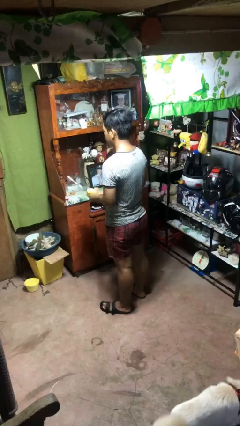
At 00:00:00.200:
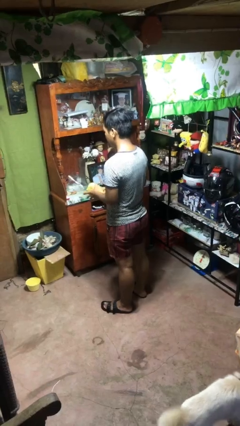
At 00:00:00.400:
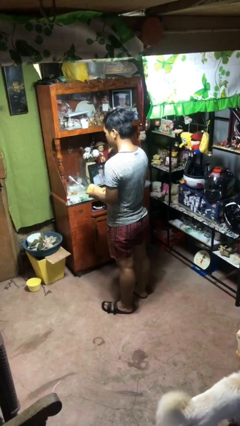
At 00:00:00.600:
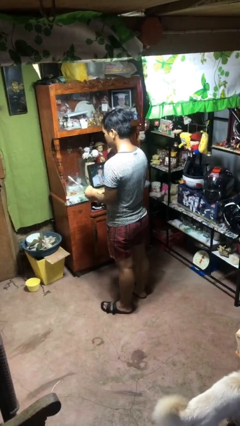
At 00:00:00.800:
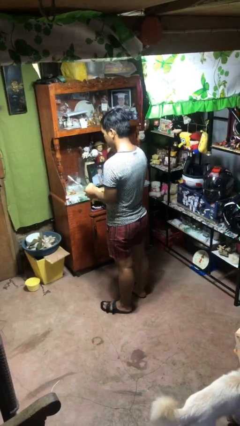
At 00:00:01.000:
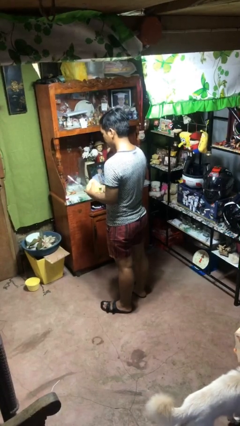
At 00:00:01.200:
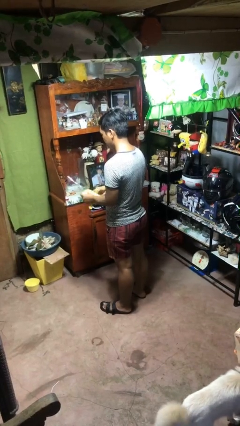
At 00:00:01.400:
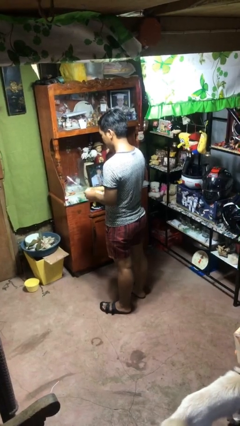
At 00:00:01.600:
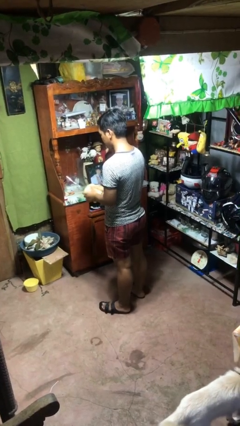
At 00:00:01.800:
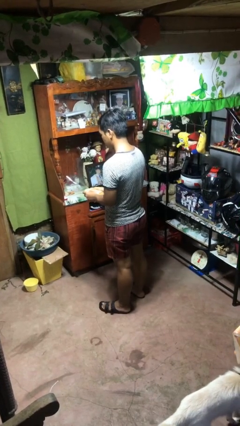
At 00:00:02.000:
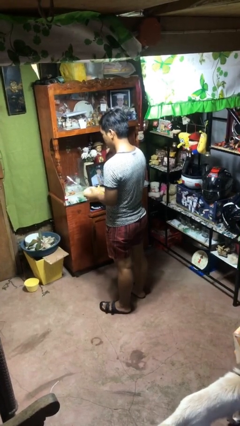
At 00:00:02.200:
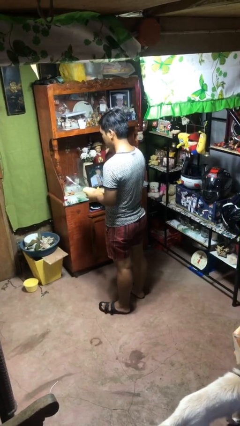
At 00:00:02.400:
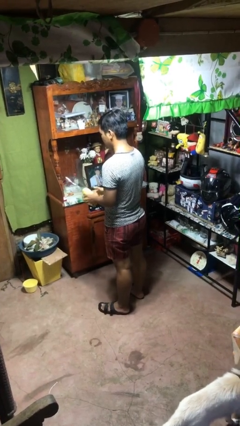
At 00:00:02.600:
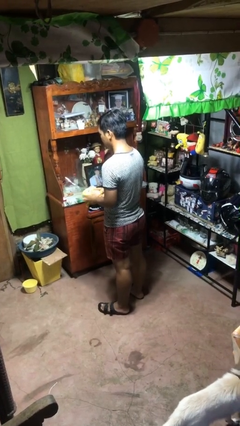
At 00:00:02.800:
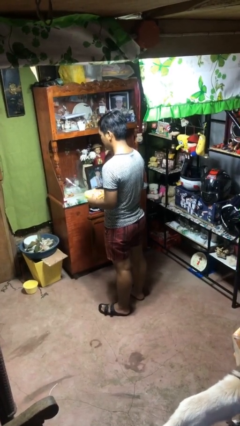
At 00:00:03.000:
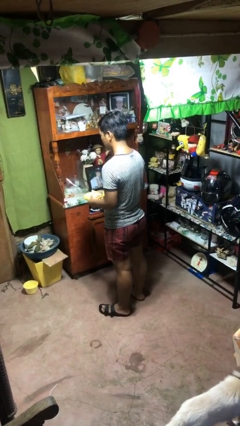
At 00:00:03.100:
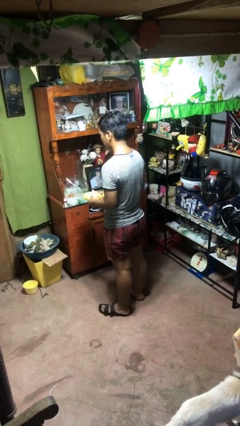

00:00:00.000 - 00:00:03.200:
person squeezes object

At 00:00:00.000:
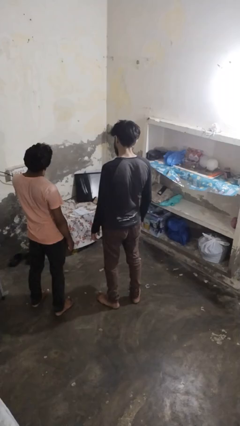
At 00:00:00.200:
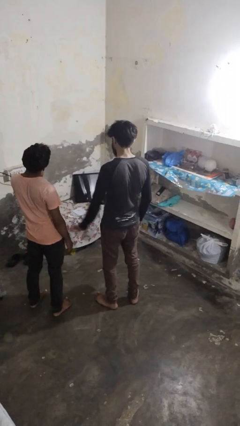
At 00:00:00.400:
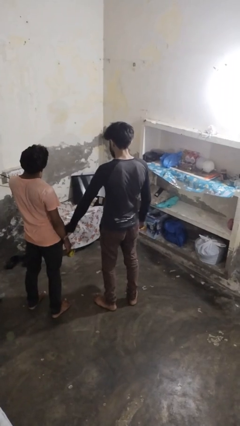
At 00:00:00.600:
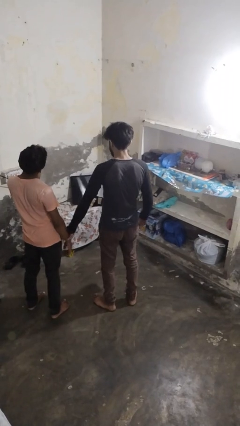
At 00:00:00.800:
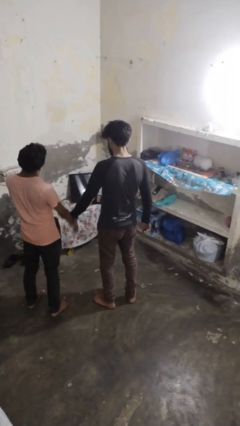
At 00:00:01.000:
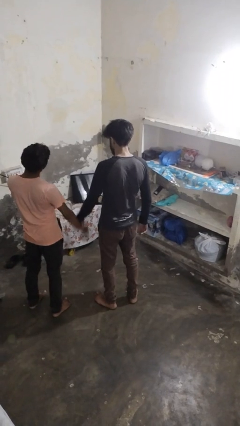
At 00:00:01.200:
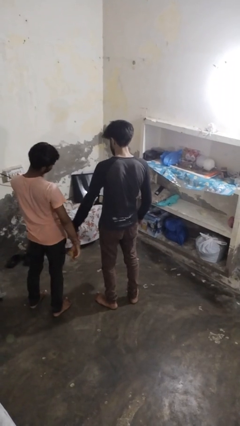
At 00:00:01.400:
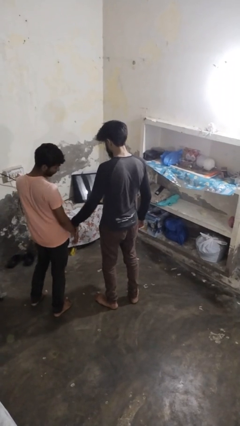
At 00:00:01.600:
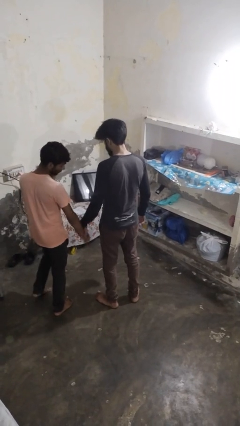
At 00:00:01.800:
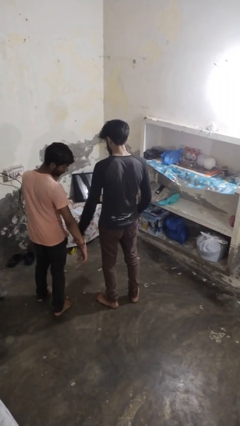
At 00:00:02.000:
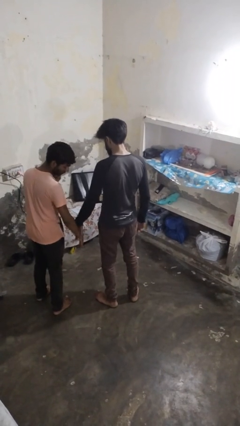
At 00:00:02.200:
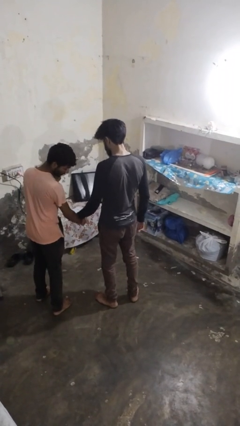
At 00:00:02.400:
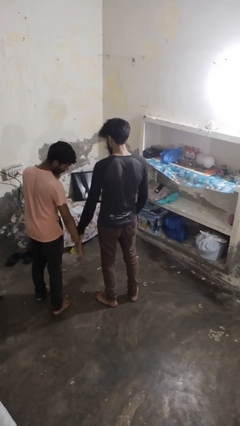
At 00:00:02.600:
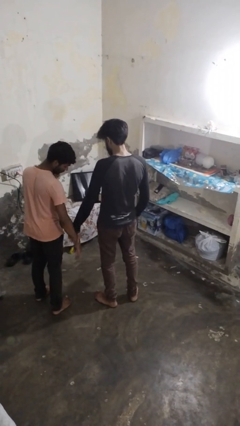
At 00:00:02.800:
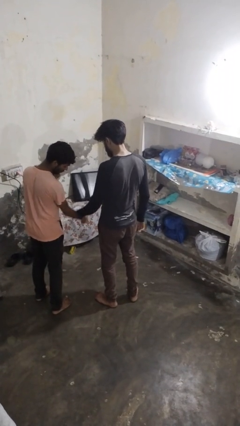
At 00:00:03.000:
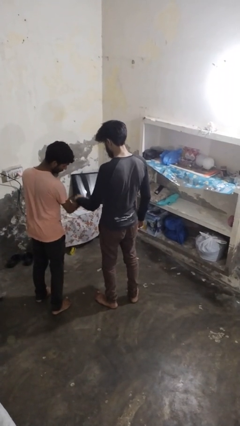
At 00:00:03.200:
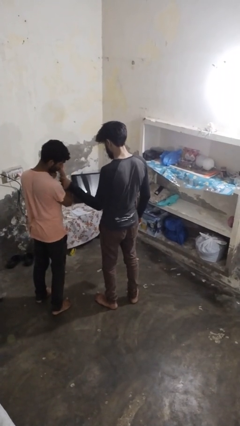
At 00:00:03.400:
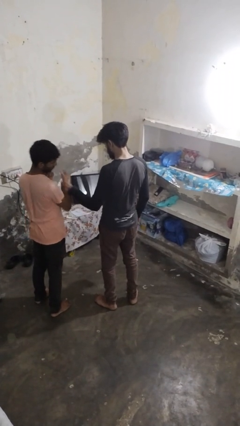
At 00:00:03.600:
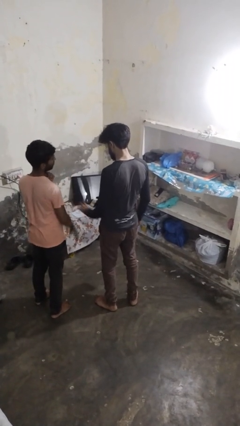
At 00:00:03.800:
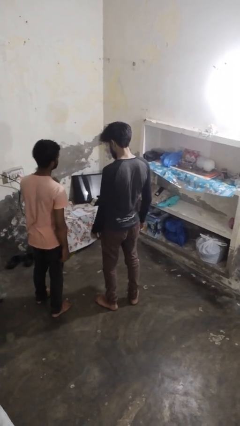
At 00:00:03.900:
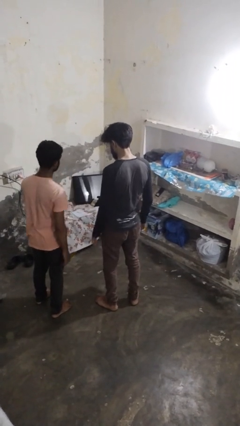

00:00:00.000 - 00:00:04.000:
person grabs person by forearm

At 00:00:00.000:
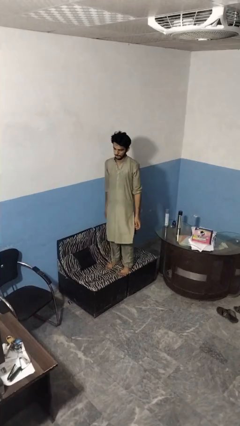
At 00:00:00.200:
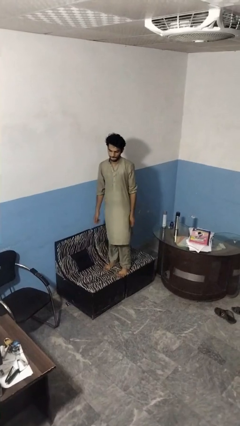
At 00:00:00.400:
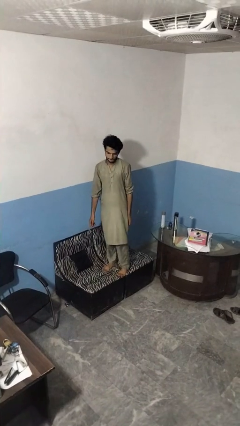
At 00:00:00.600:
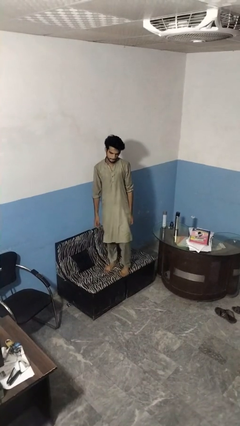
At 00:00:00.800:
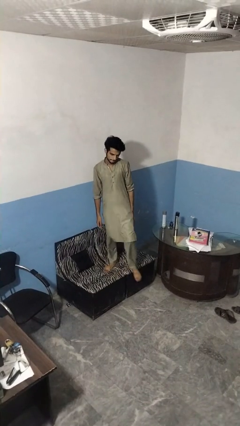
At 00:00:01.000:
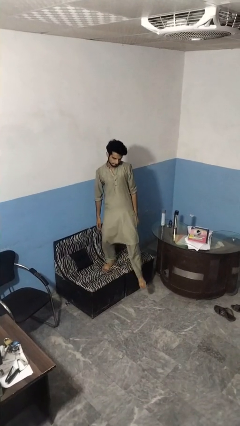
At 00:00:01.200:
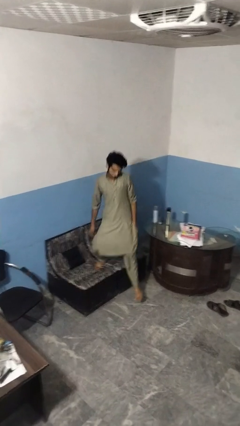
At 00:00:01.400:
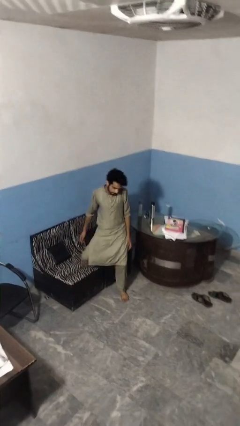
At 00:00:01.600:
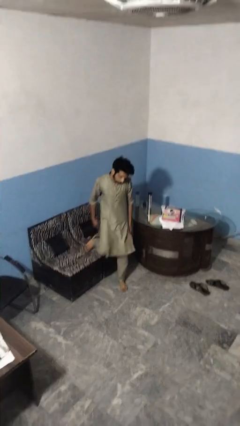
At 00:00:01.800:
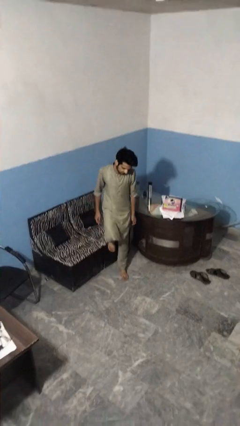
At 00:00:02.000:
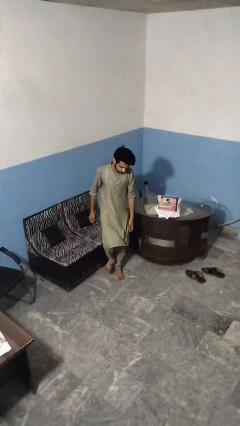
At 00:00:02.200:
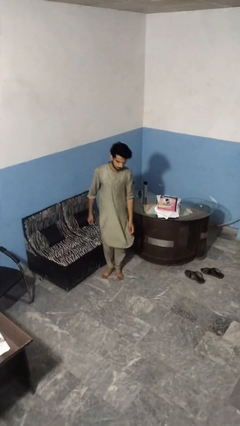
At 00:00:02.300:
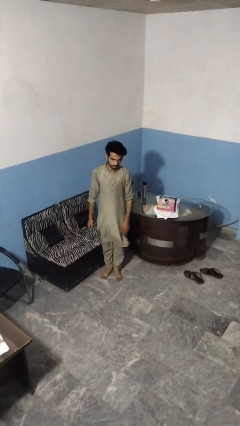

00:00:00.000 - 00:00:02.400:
person climbs off couch

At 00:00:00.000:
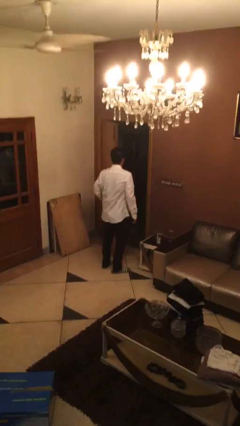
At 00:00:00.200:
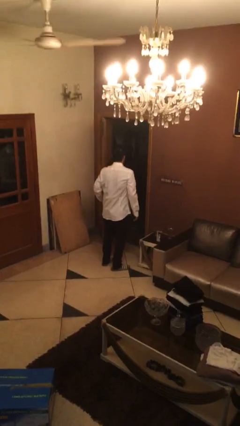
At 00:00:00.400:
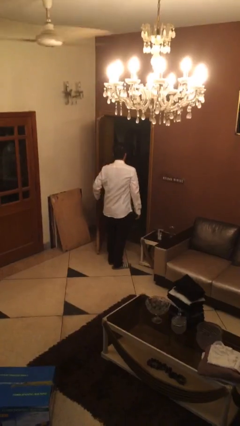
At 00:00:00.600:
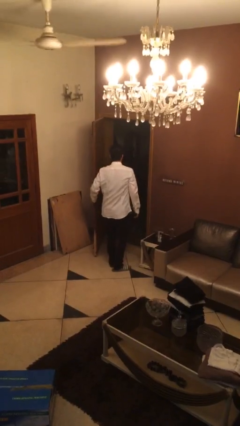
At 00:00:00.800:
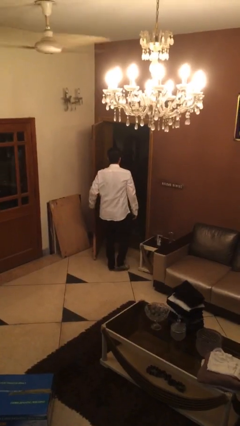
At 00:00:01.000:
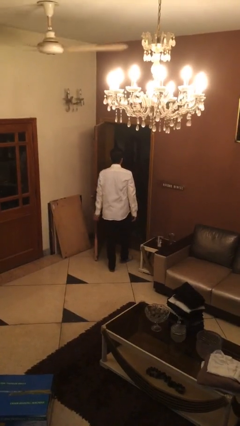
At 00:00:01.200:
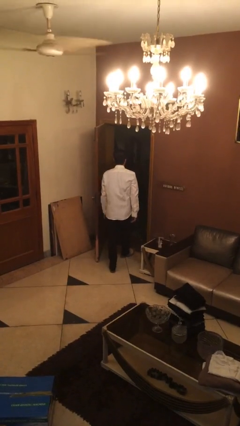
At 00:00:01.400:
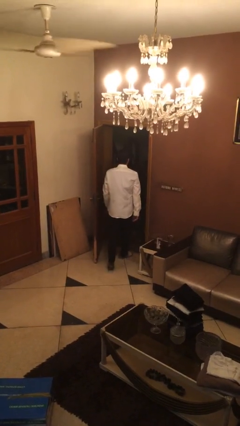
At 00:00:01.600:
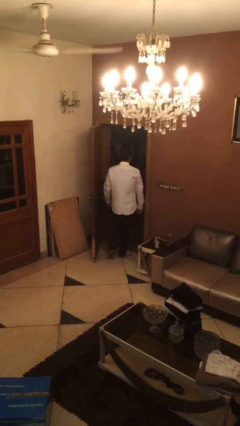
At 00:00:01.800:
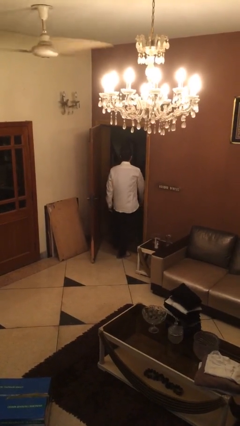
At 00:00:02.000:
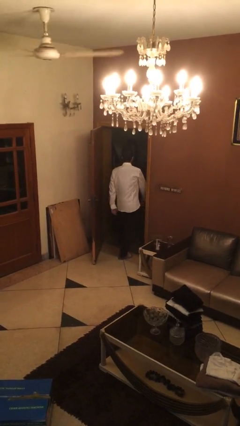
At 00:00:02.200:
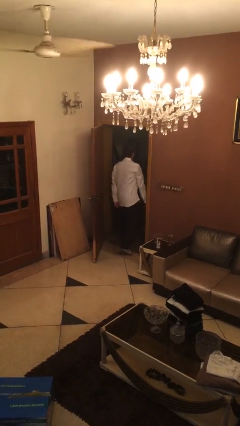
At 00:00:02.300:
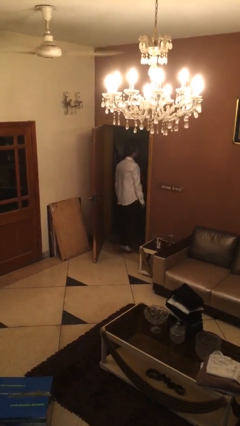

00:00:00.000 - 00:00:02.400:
person exits scene through structure

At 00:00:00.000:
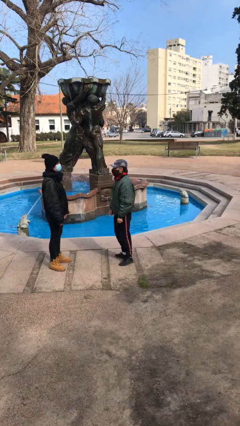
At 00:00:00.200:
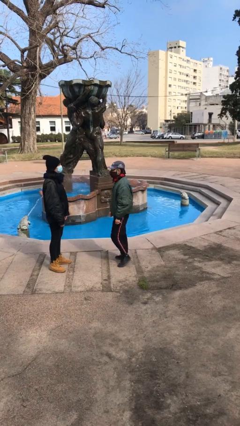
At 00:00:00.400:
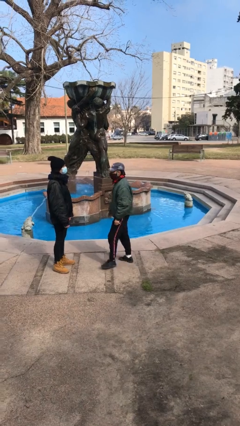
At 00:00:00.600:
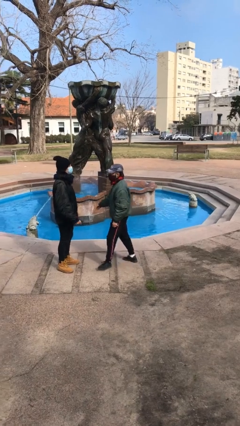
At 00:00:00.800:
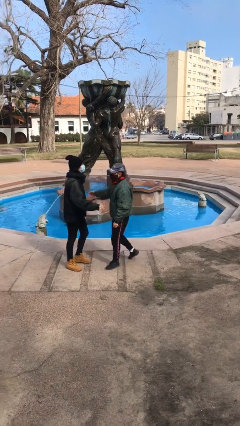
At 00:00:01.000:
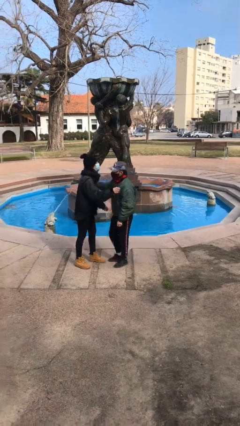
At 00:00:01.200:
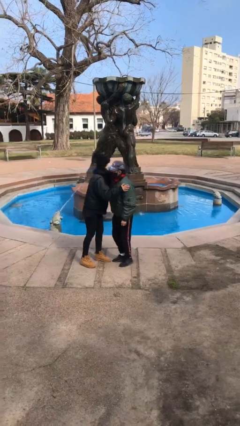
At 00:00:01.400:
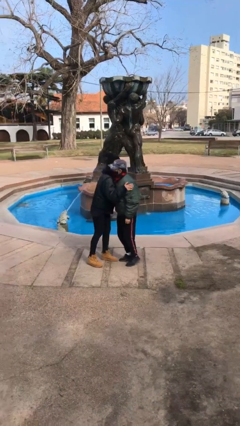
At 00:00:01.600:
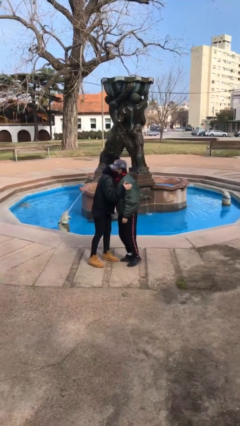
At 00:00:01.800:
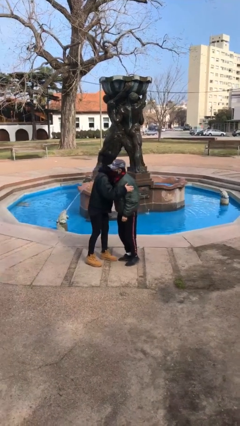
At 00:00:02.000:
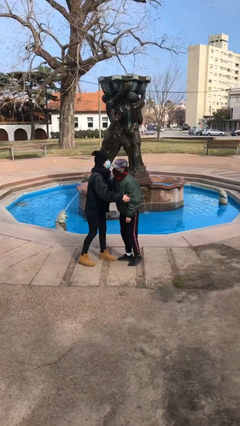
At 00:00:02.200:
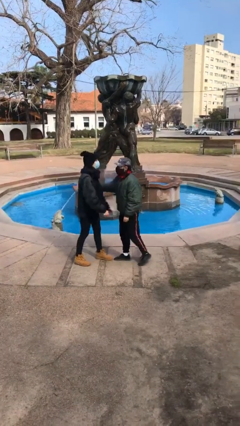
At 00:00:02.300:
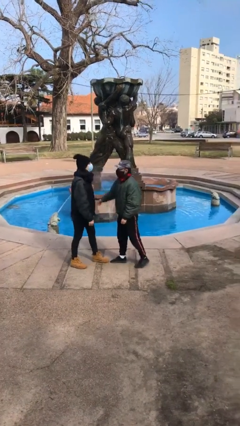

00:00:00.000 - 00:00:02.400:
person kisses cheek of person

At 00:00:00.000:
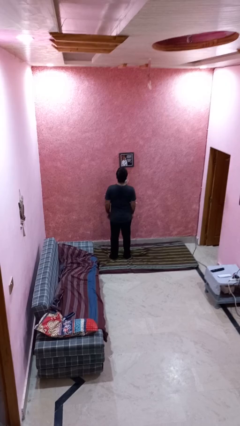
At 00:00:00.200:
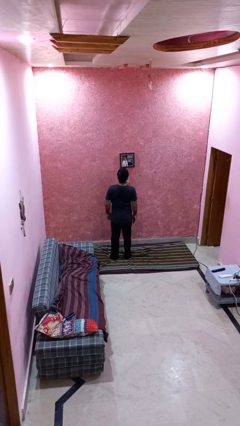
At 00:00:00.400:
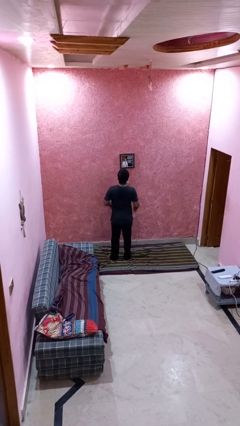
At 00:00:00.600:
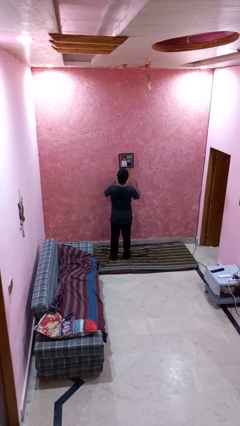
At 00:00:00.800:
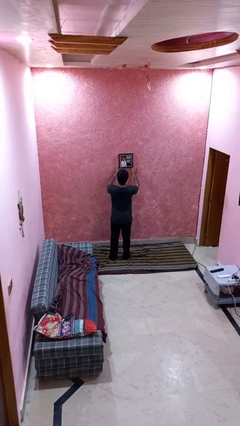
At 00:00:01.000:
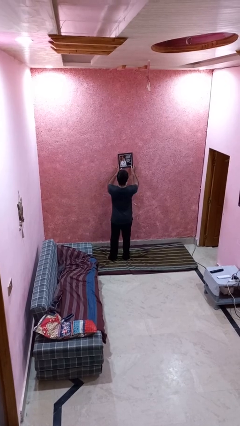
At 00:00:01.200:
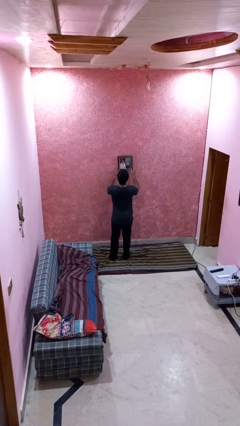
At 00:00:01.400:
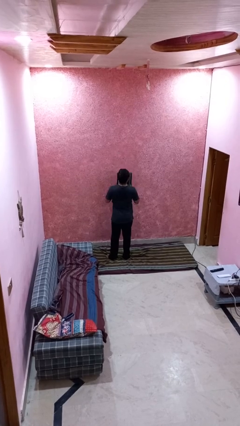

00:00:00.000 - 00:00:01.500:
person takes down picture frame

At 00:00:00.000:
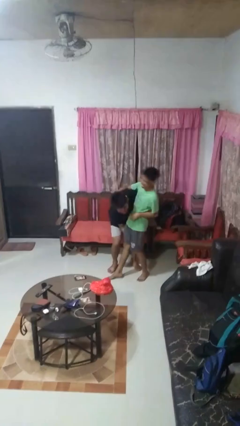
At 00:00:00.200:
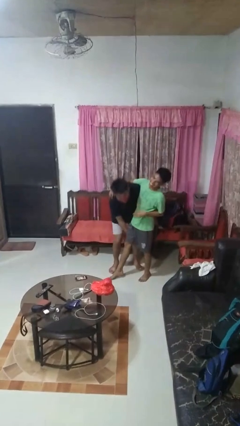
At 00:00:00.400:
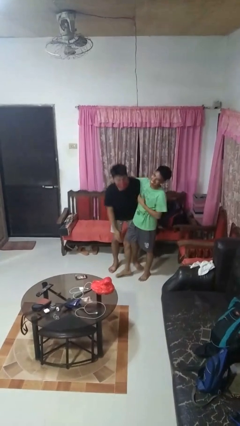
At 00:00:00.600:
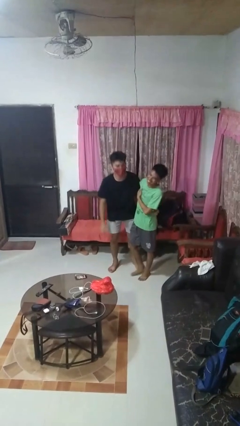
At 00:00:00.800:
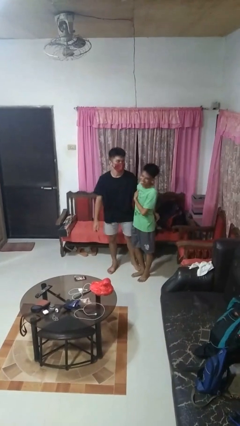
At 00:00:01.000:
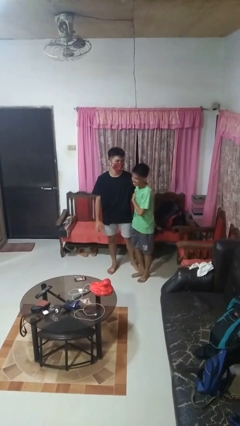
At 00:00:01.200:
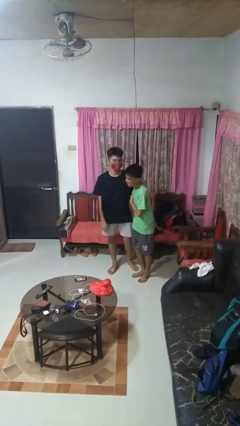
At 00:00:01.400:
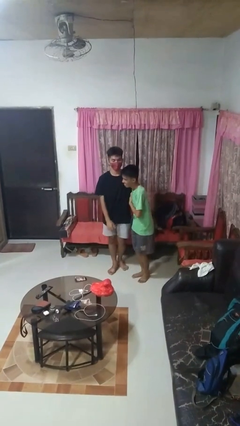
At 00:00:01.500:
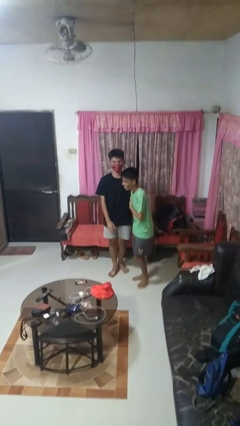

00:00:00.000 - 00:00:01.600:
person puts down person
